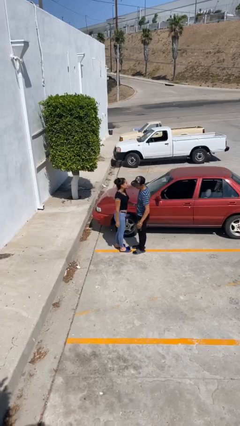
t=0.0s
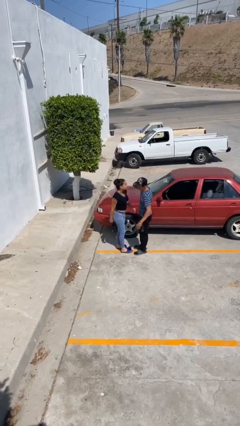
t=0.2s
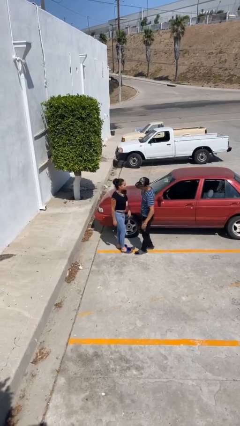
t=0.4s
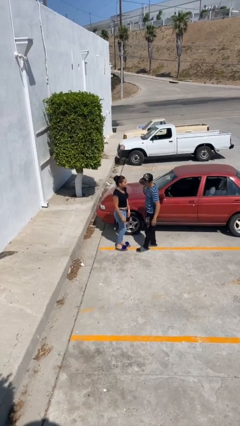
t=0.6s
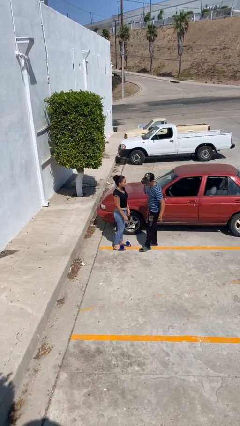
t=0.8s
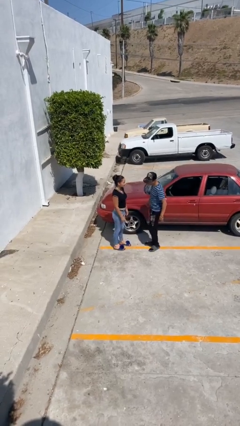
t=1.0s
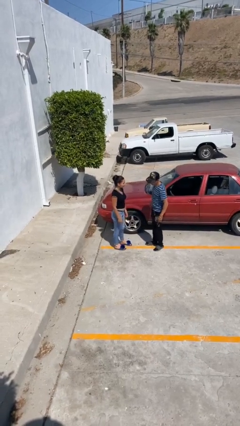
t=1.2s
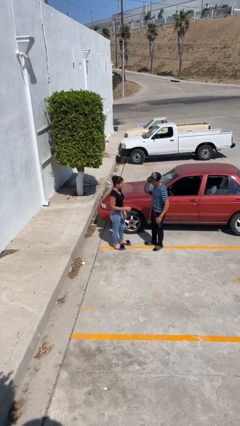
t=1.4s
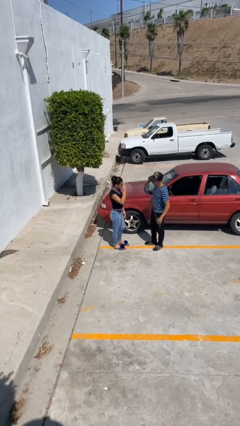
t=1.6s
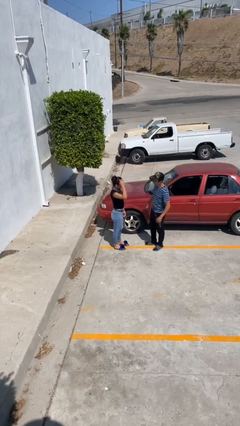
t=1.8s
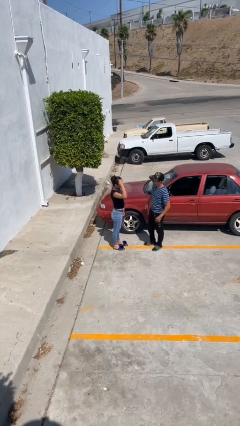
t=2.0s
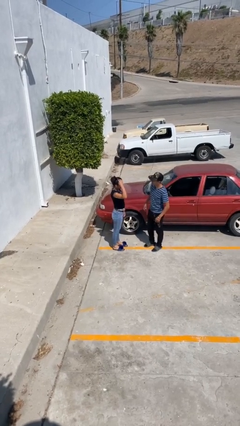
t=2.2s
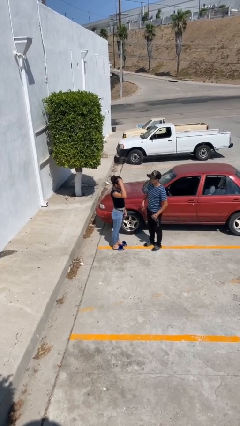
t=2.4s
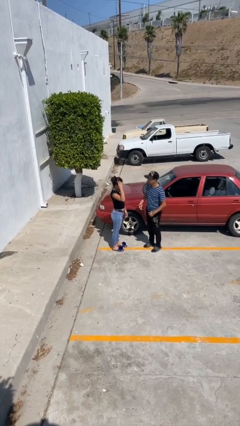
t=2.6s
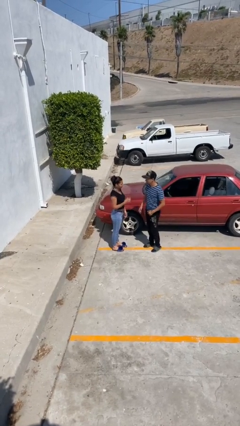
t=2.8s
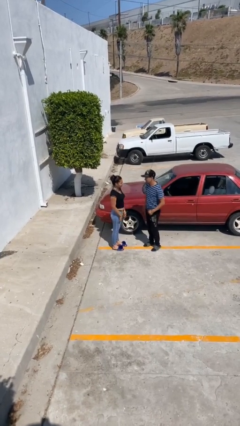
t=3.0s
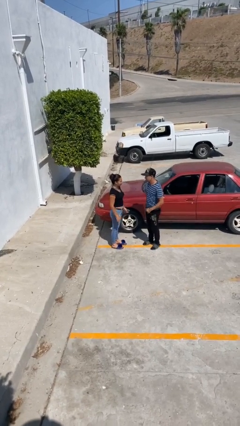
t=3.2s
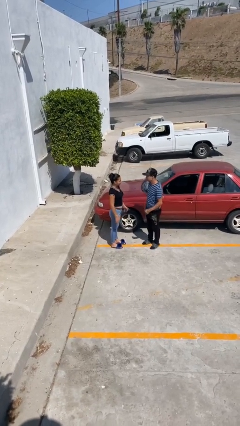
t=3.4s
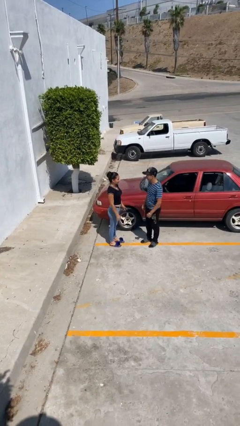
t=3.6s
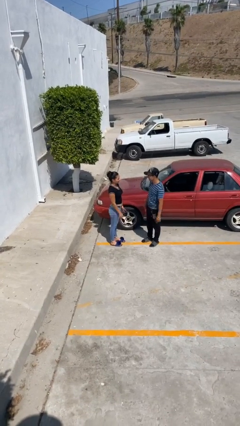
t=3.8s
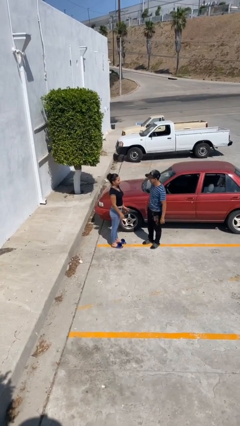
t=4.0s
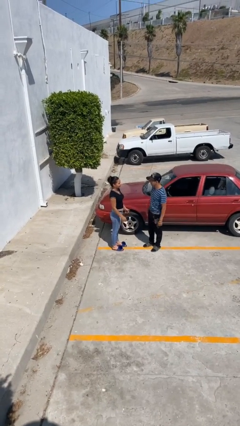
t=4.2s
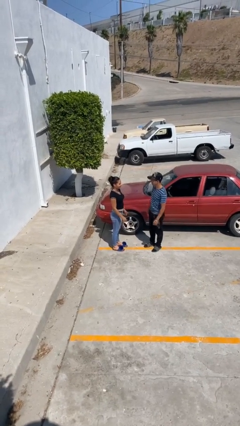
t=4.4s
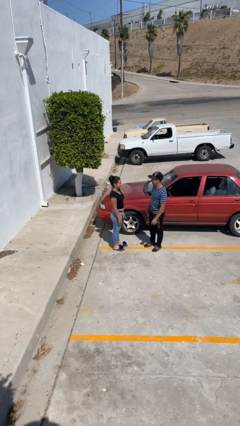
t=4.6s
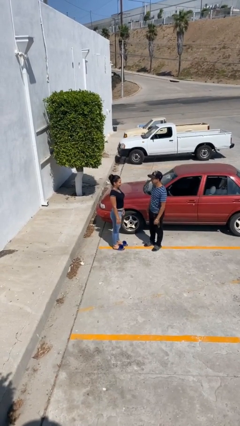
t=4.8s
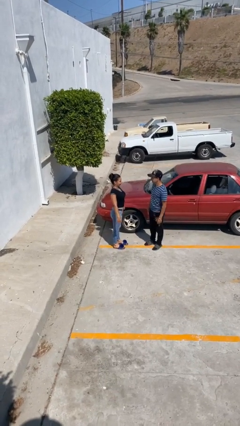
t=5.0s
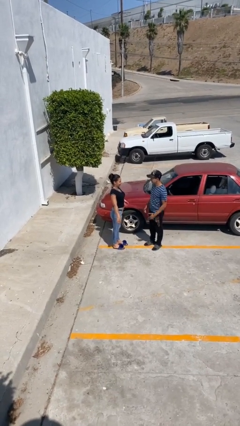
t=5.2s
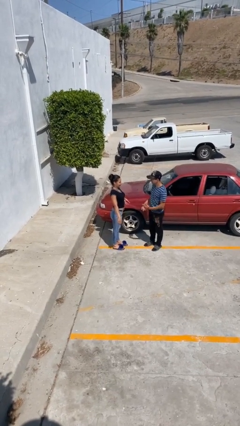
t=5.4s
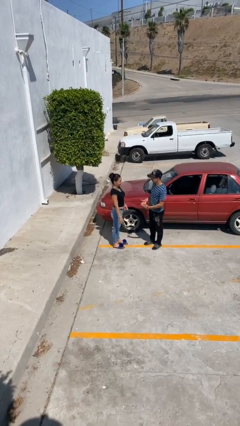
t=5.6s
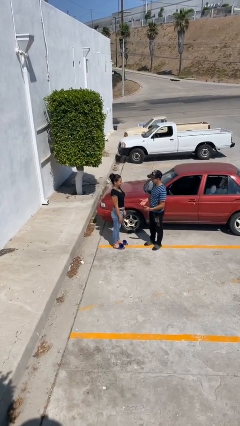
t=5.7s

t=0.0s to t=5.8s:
person talks to person

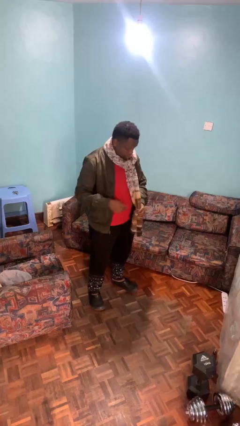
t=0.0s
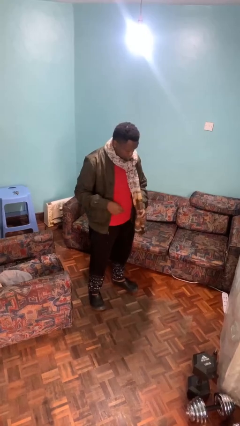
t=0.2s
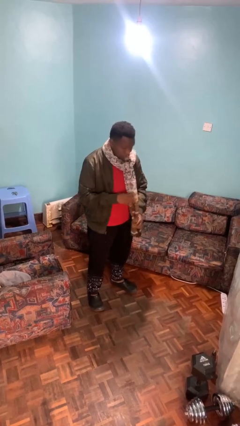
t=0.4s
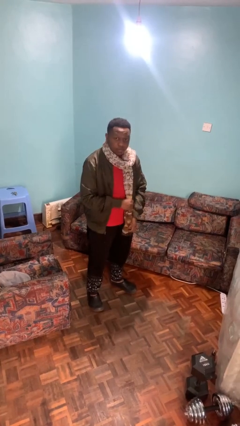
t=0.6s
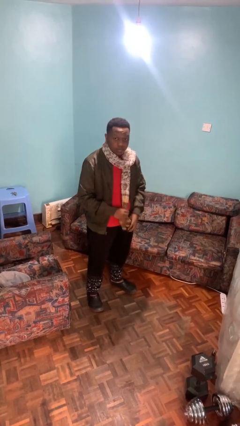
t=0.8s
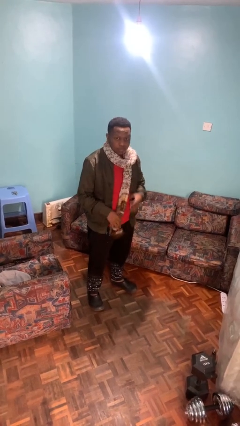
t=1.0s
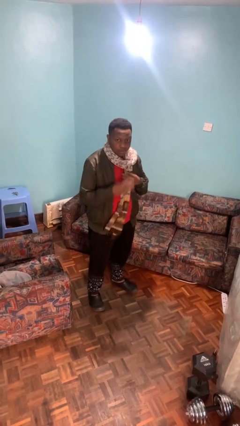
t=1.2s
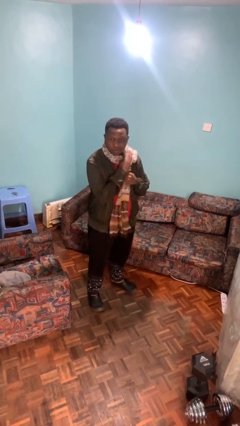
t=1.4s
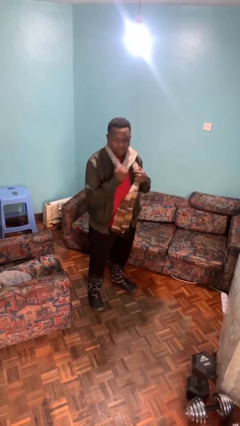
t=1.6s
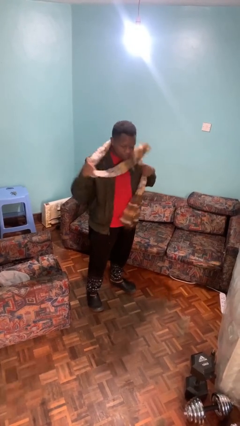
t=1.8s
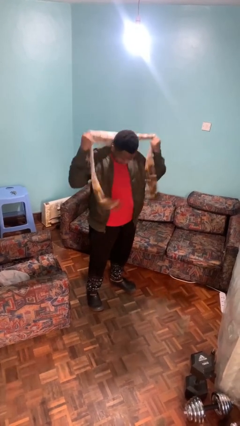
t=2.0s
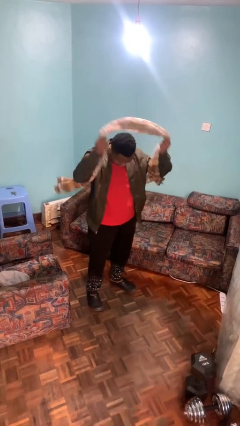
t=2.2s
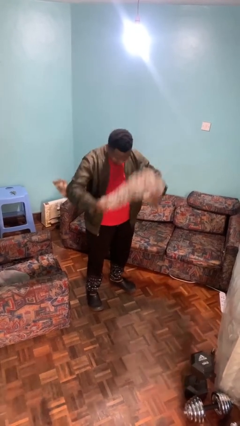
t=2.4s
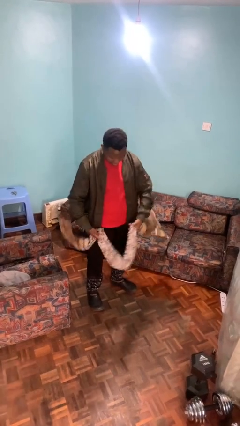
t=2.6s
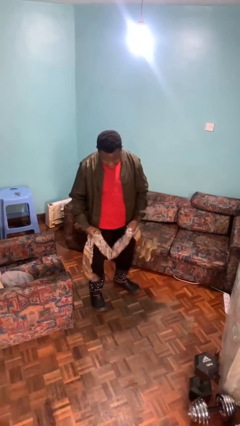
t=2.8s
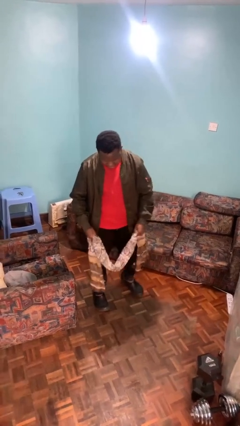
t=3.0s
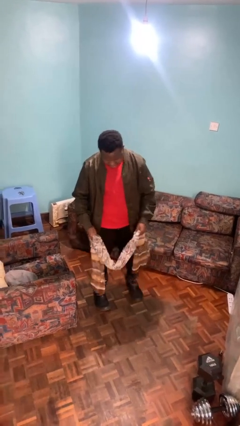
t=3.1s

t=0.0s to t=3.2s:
person takes off scarf

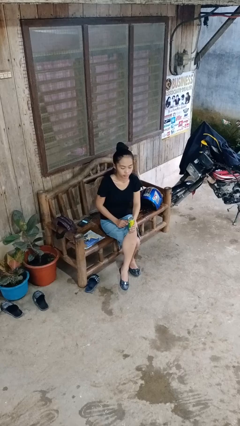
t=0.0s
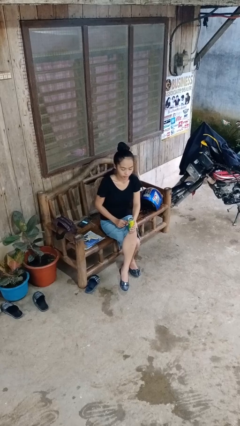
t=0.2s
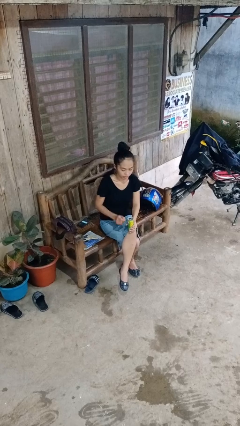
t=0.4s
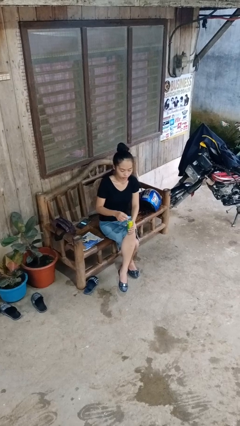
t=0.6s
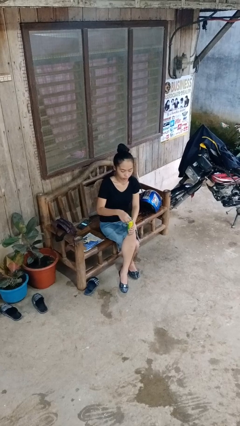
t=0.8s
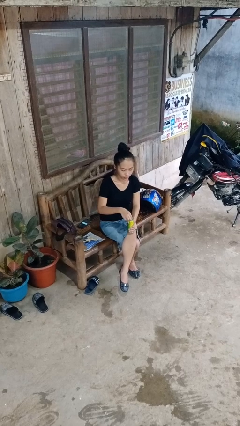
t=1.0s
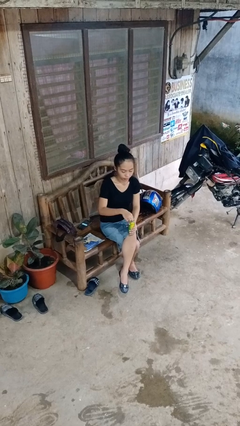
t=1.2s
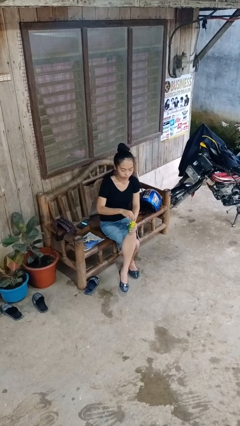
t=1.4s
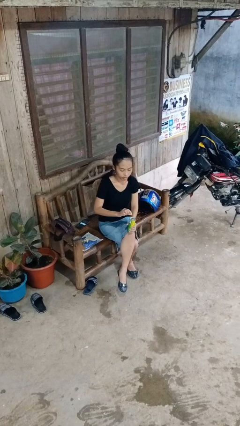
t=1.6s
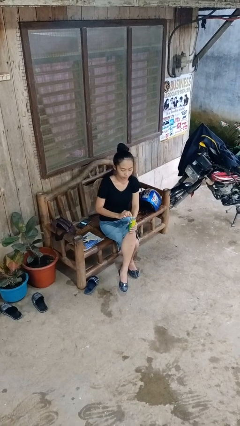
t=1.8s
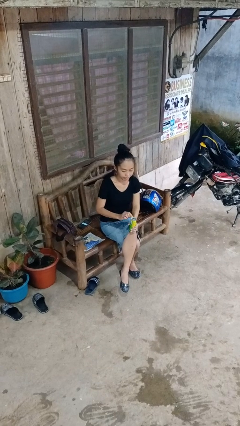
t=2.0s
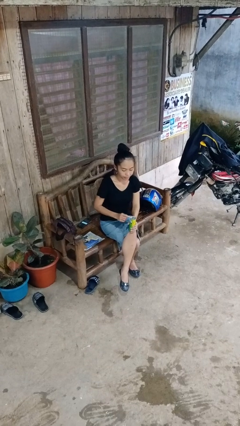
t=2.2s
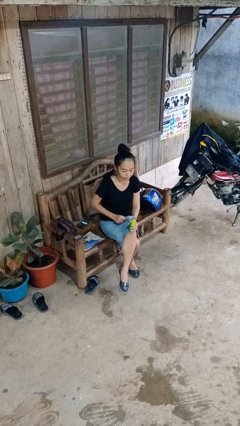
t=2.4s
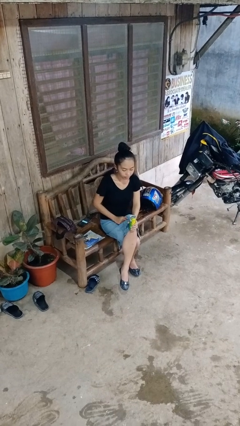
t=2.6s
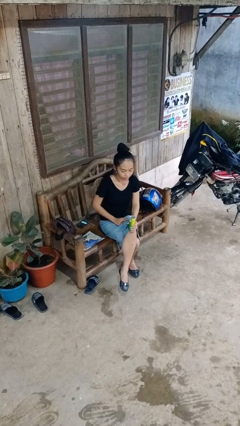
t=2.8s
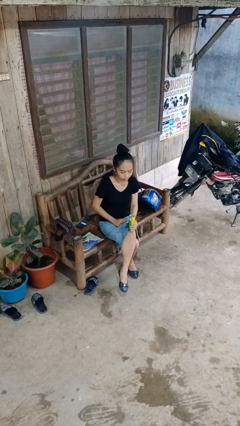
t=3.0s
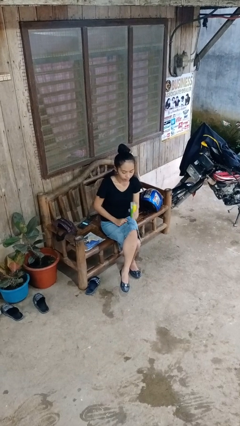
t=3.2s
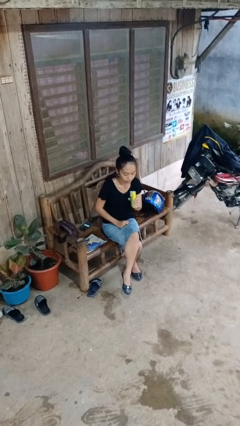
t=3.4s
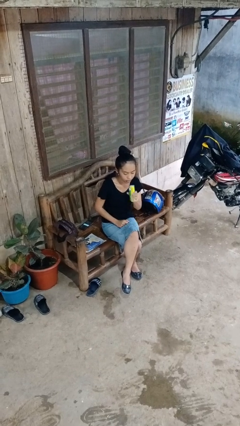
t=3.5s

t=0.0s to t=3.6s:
person opens beverage can

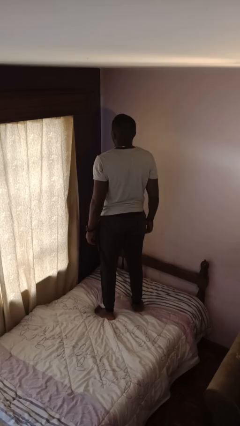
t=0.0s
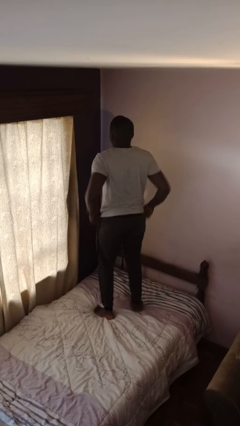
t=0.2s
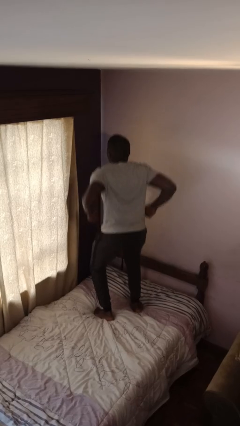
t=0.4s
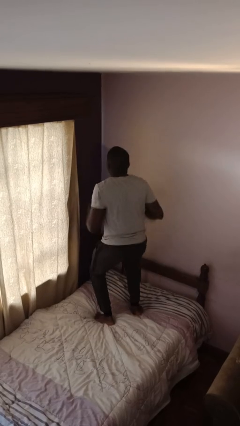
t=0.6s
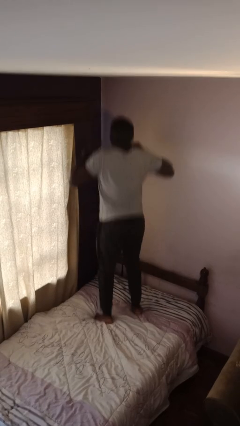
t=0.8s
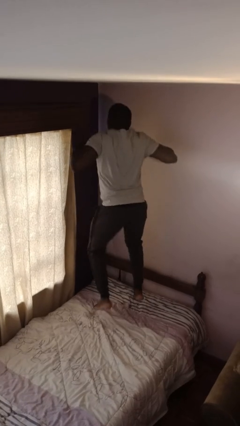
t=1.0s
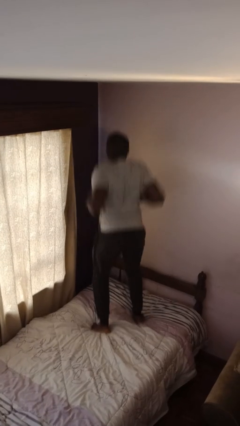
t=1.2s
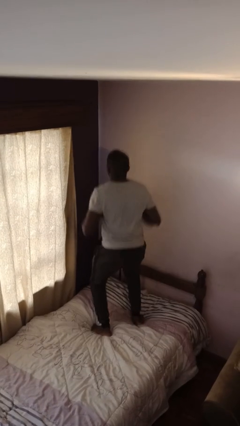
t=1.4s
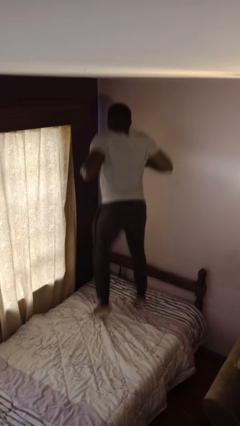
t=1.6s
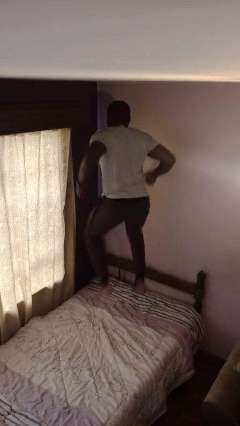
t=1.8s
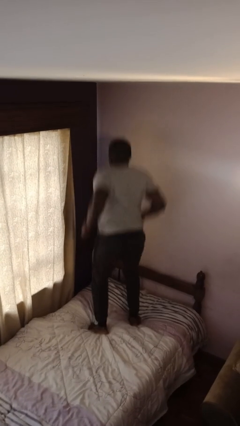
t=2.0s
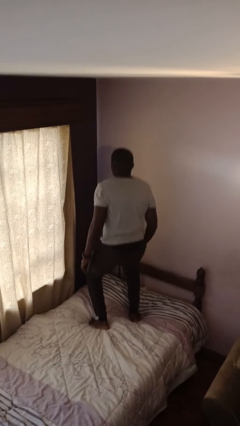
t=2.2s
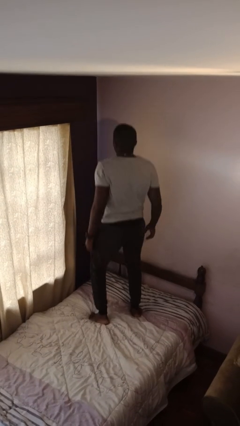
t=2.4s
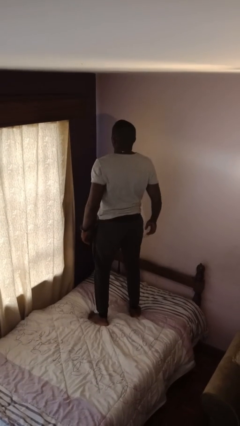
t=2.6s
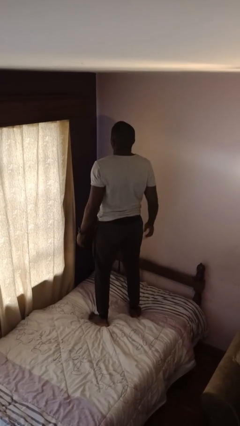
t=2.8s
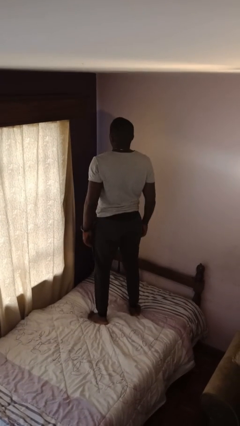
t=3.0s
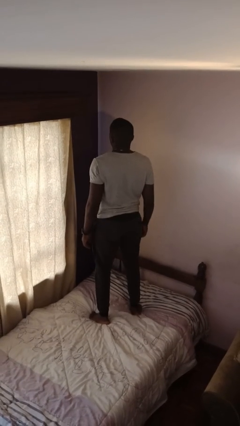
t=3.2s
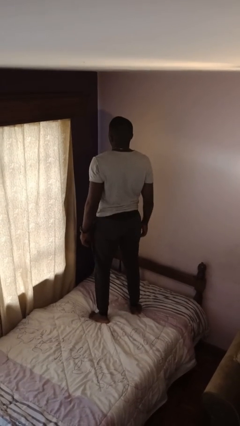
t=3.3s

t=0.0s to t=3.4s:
person jumps on bed

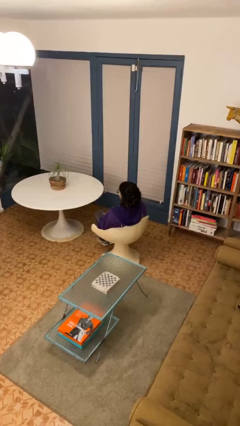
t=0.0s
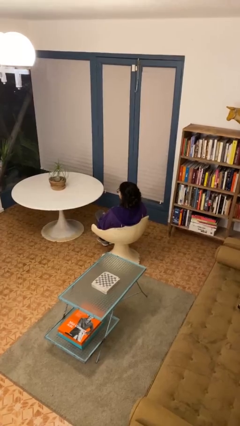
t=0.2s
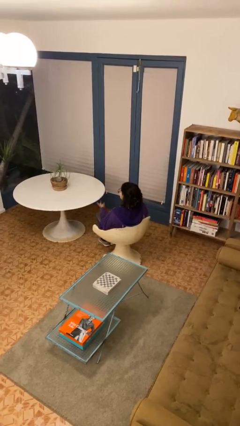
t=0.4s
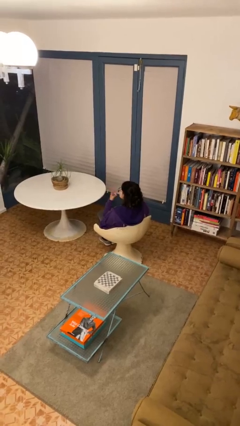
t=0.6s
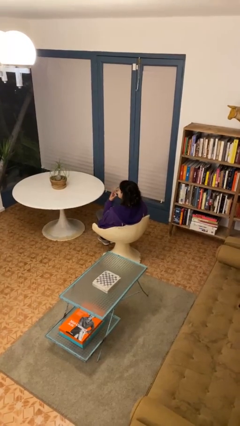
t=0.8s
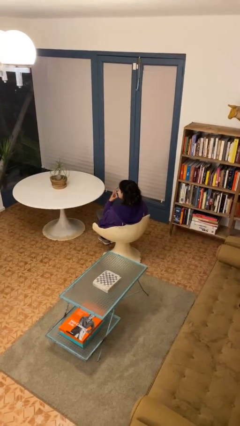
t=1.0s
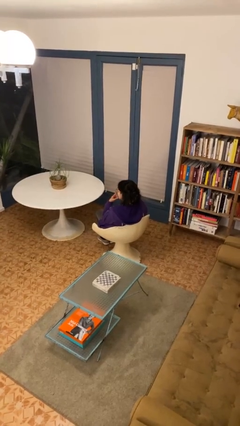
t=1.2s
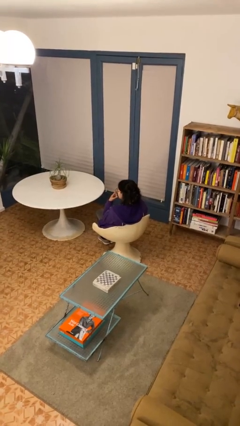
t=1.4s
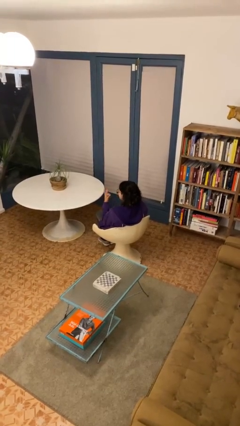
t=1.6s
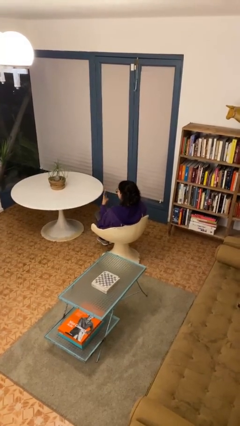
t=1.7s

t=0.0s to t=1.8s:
person gestures watch closely

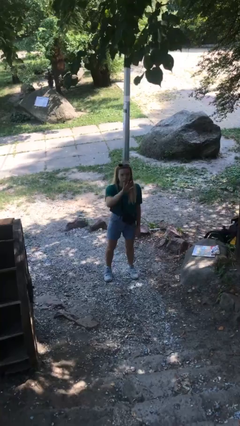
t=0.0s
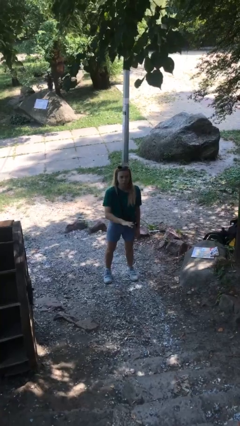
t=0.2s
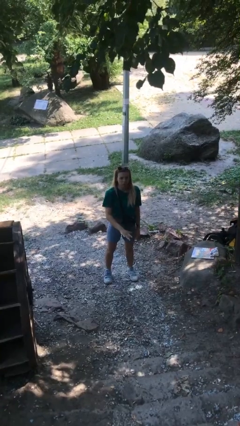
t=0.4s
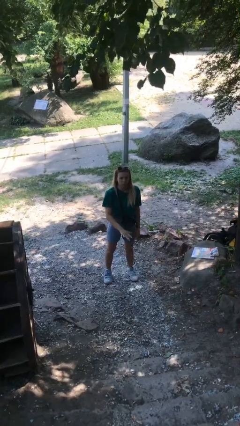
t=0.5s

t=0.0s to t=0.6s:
person gestures swipe down
